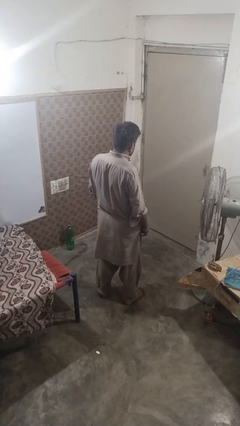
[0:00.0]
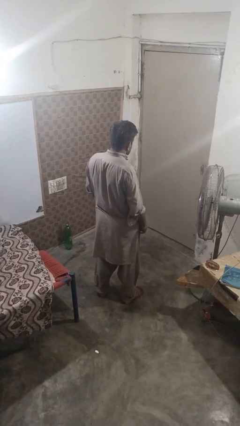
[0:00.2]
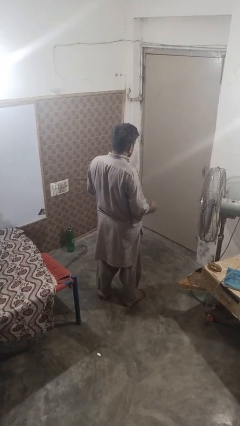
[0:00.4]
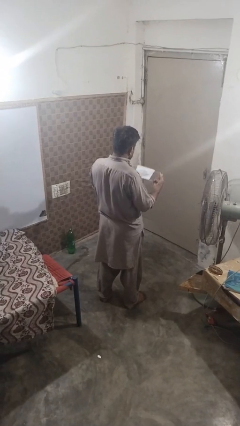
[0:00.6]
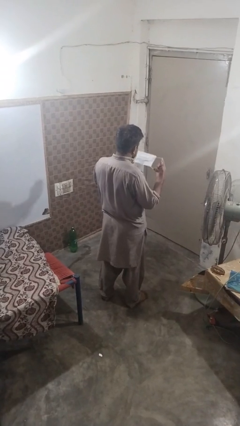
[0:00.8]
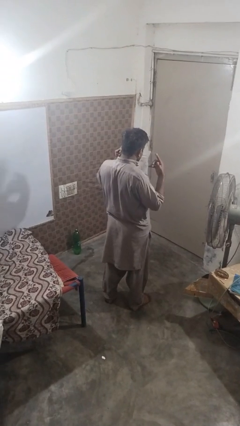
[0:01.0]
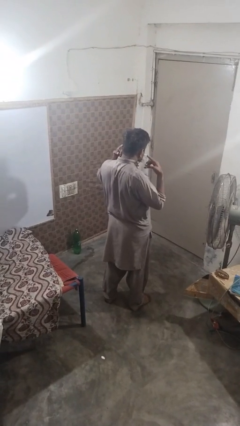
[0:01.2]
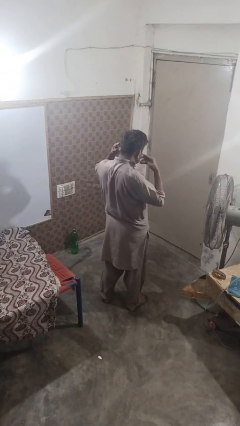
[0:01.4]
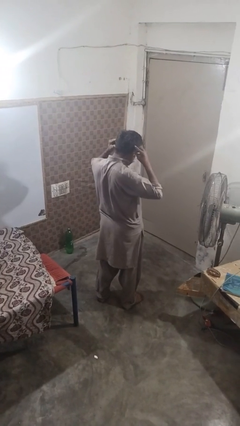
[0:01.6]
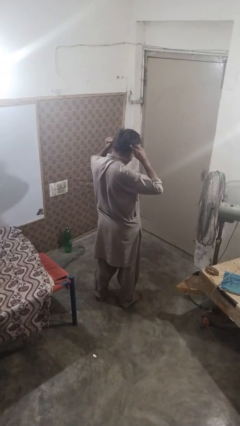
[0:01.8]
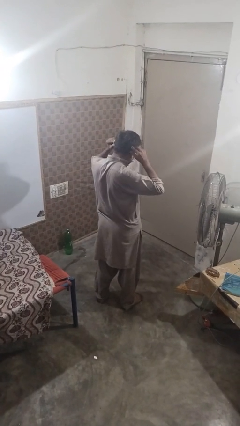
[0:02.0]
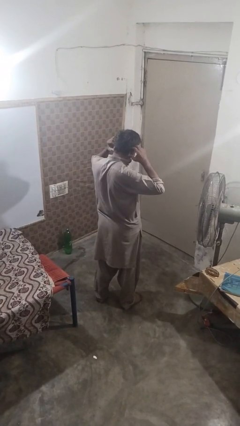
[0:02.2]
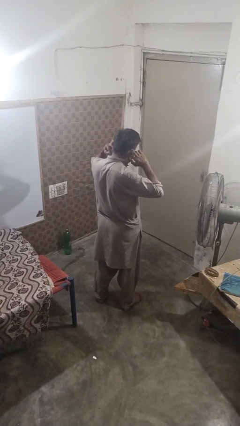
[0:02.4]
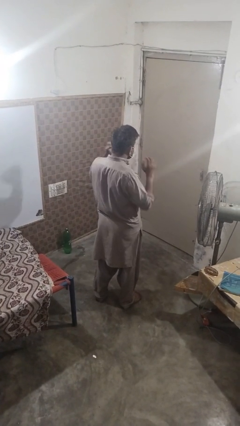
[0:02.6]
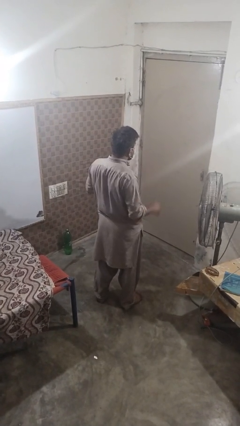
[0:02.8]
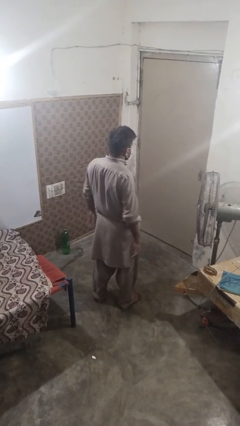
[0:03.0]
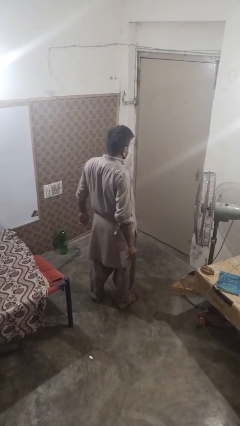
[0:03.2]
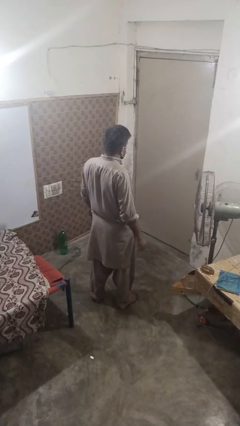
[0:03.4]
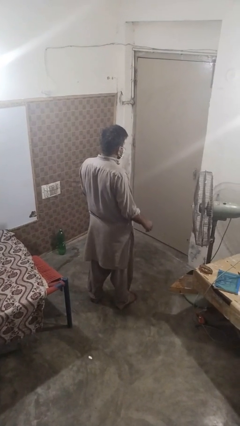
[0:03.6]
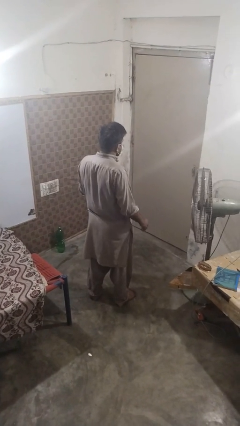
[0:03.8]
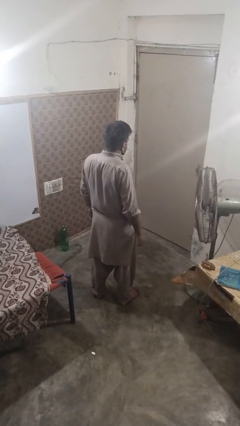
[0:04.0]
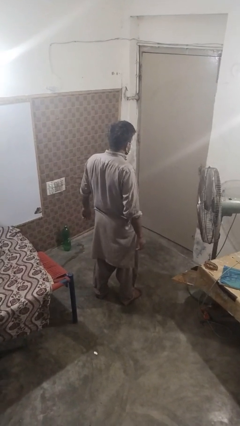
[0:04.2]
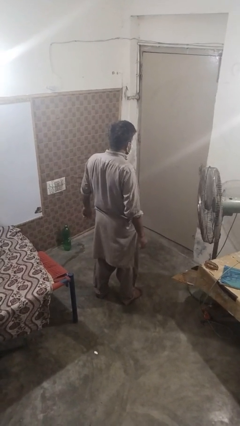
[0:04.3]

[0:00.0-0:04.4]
person puts on facemask

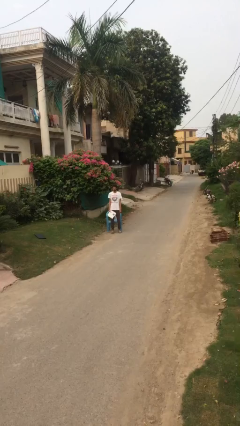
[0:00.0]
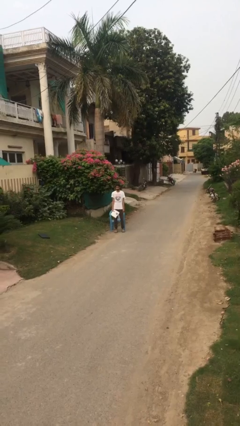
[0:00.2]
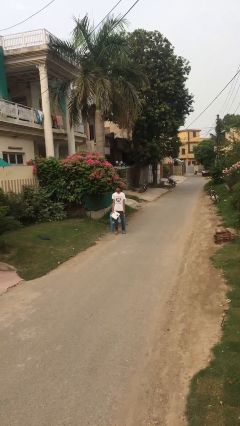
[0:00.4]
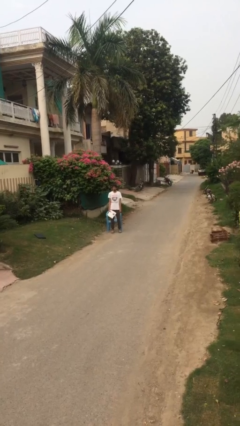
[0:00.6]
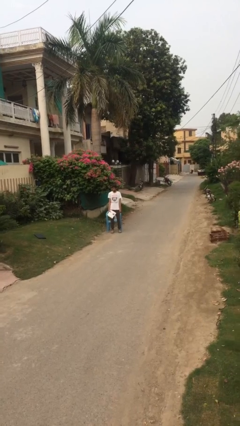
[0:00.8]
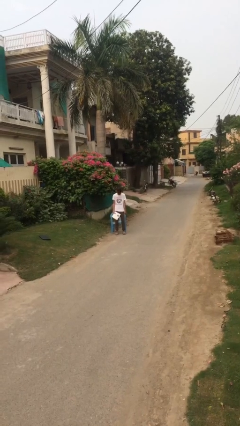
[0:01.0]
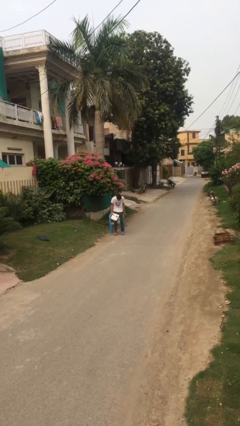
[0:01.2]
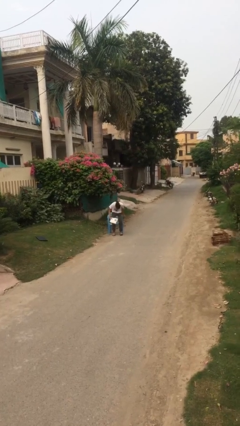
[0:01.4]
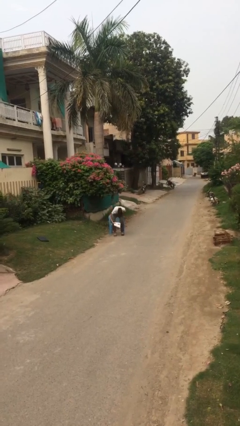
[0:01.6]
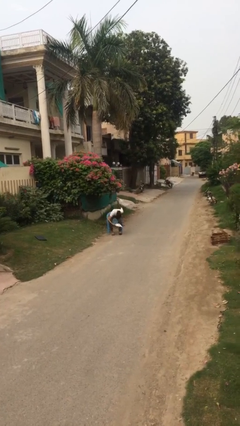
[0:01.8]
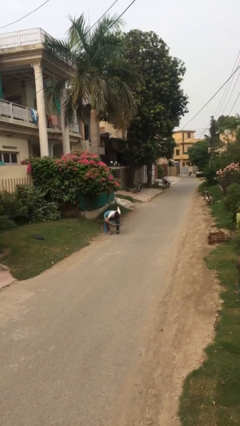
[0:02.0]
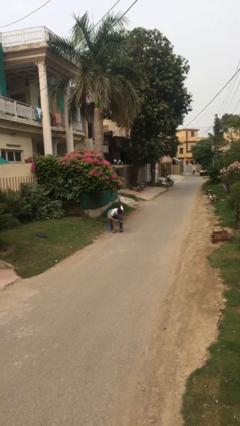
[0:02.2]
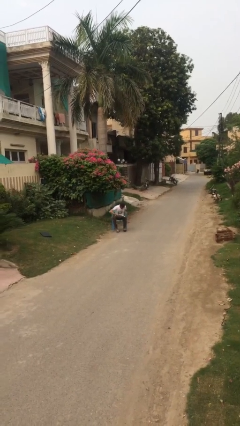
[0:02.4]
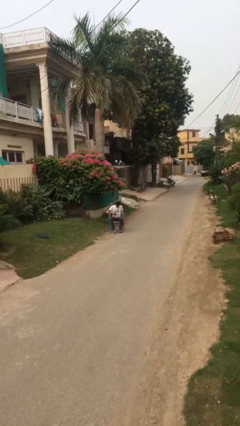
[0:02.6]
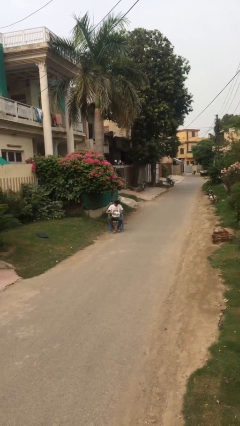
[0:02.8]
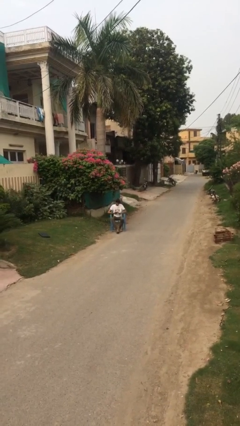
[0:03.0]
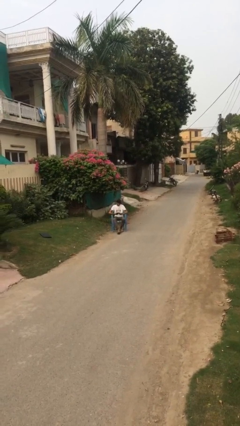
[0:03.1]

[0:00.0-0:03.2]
person sits down

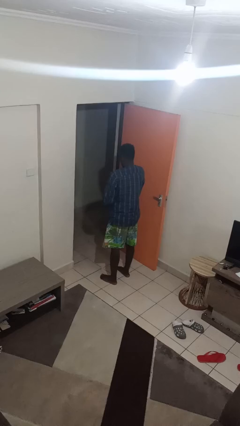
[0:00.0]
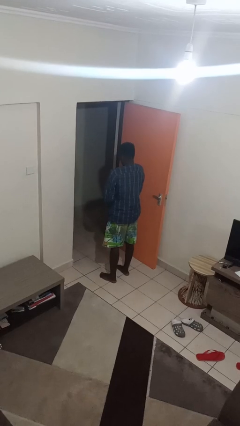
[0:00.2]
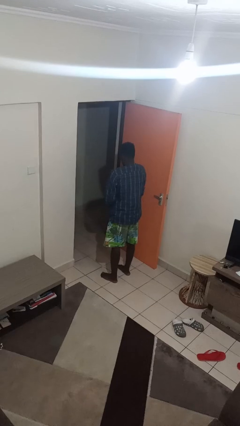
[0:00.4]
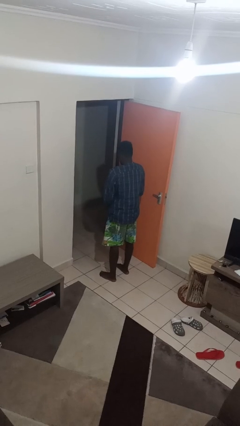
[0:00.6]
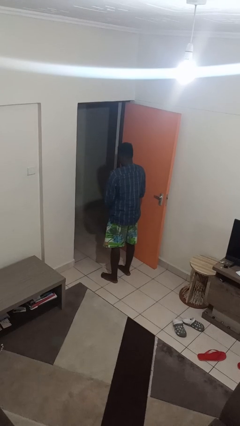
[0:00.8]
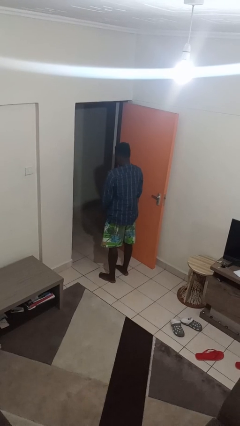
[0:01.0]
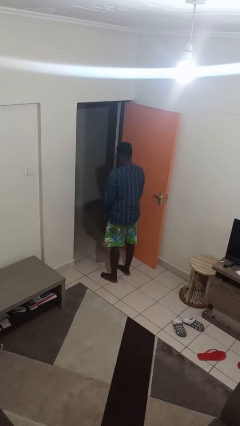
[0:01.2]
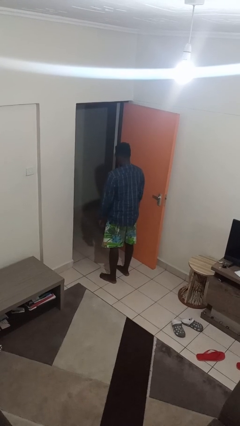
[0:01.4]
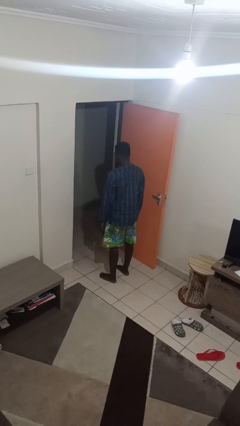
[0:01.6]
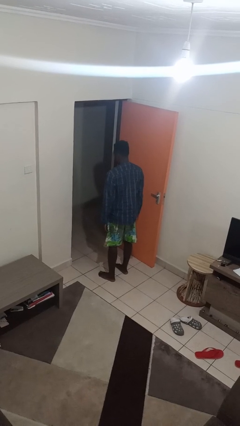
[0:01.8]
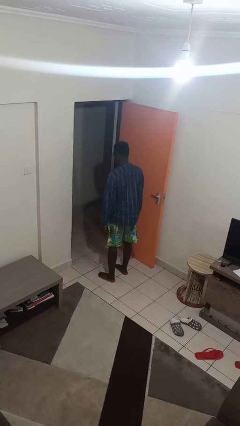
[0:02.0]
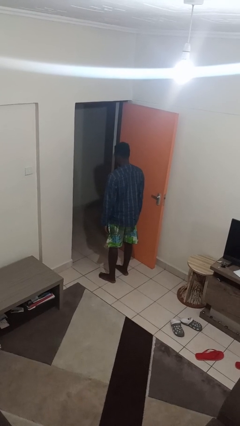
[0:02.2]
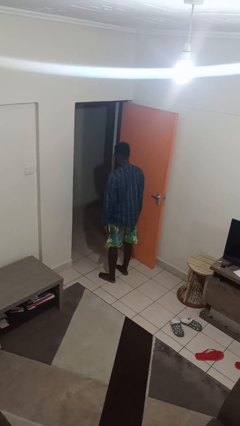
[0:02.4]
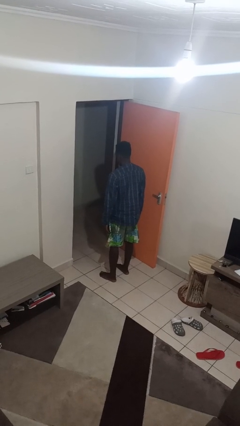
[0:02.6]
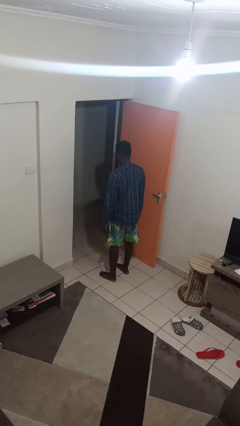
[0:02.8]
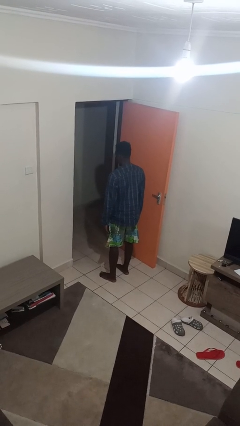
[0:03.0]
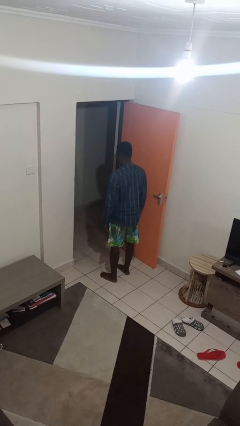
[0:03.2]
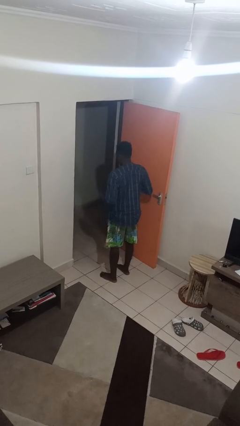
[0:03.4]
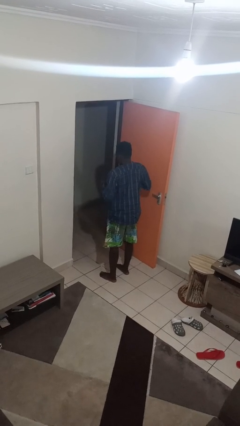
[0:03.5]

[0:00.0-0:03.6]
person unzips jacket

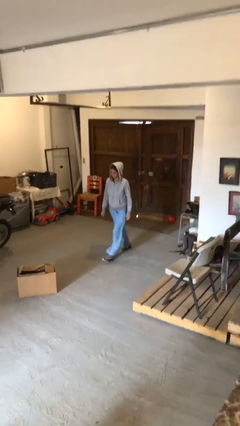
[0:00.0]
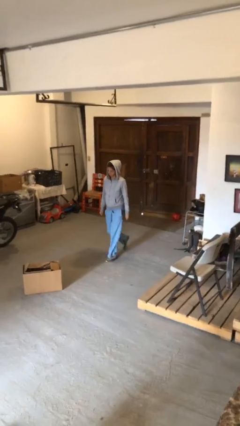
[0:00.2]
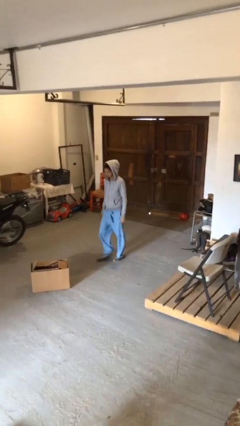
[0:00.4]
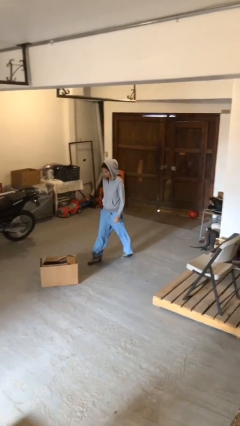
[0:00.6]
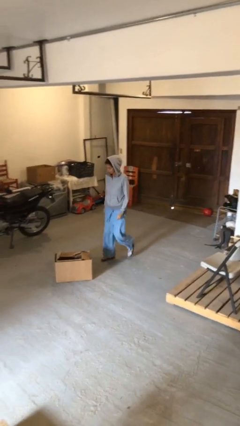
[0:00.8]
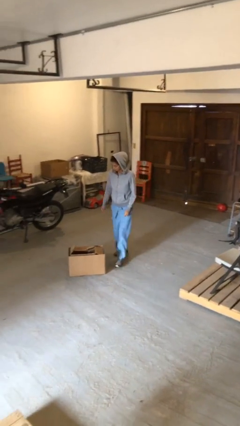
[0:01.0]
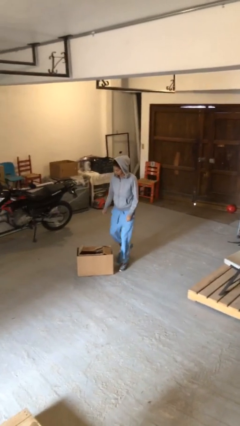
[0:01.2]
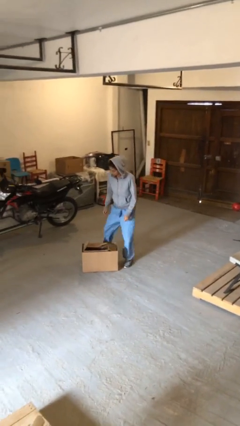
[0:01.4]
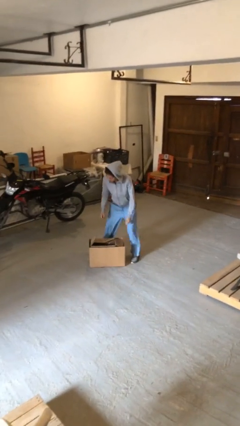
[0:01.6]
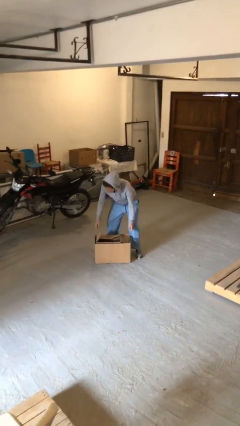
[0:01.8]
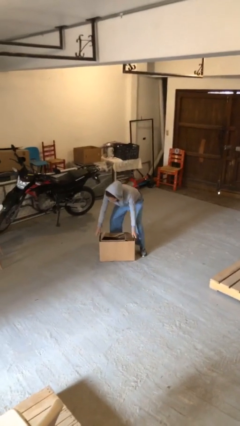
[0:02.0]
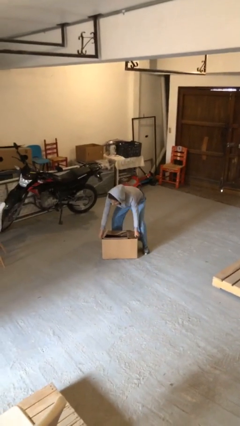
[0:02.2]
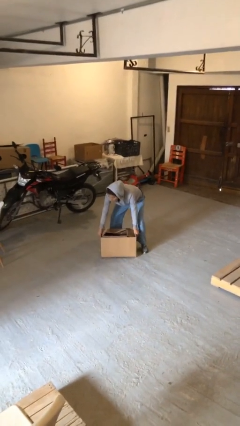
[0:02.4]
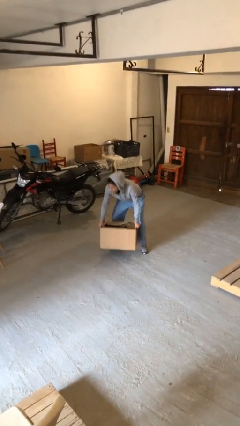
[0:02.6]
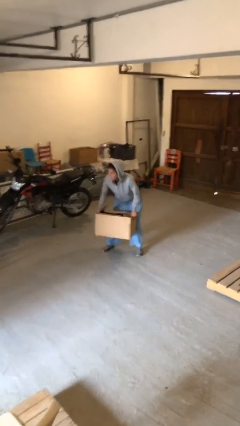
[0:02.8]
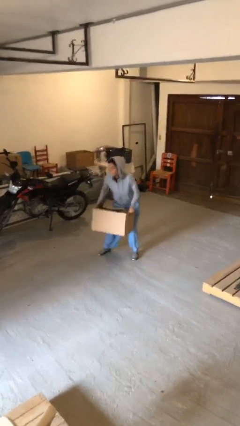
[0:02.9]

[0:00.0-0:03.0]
person picks up object from floor

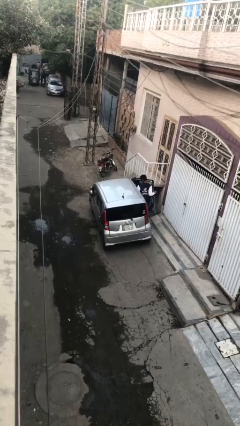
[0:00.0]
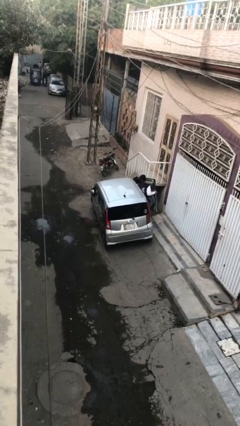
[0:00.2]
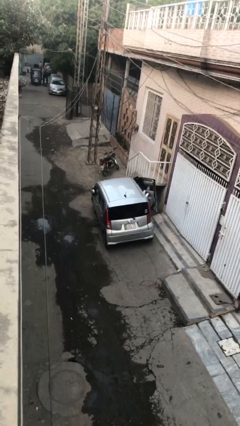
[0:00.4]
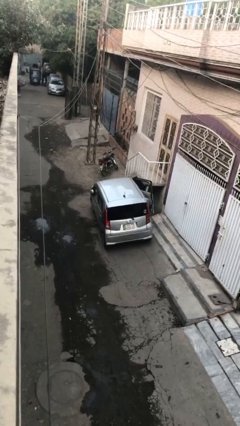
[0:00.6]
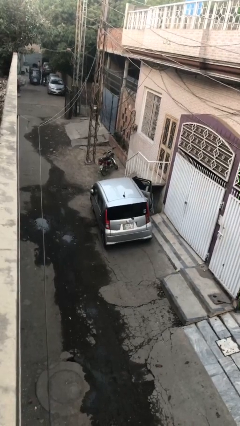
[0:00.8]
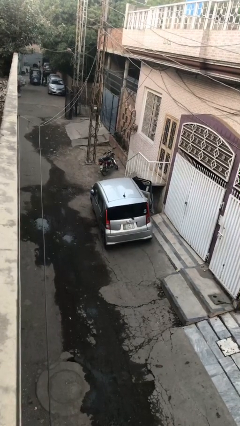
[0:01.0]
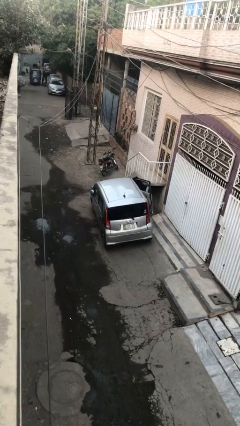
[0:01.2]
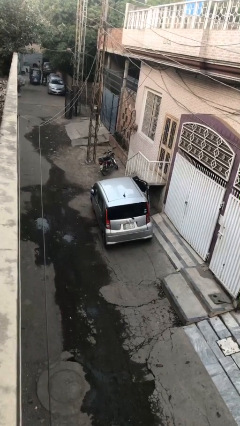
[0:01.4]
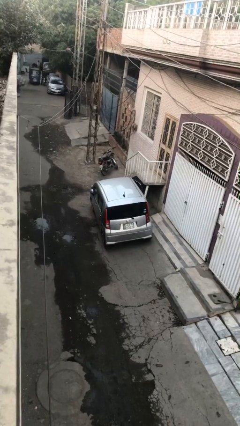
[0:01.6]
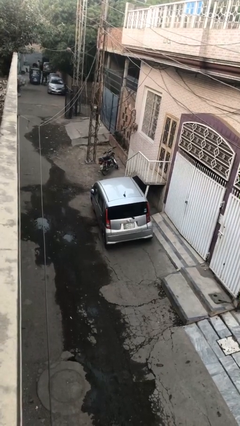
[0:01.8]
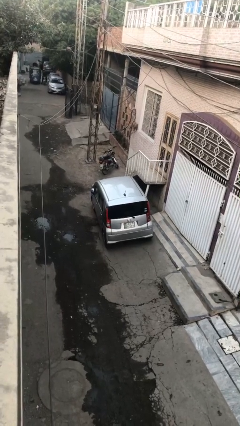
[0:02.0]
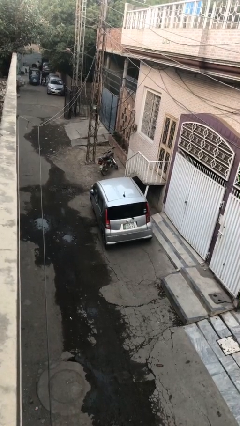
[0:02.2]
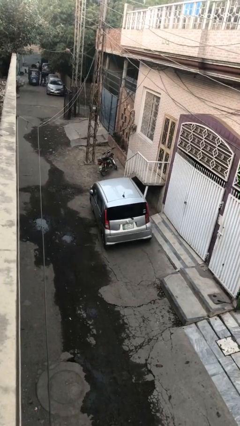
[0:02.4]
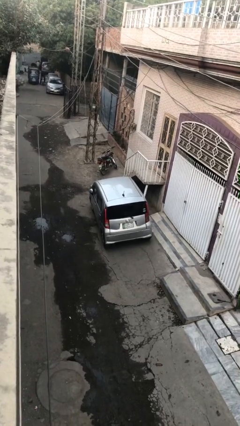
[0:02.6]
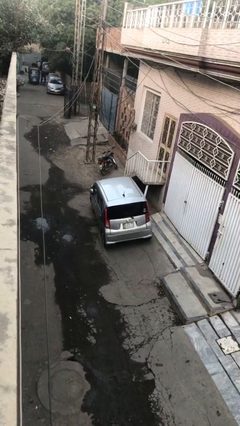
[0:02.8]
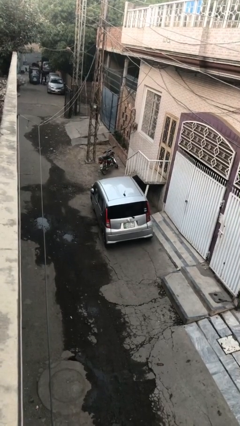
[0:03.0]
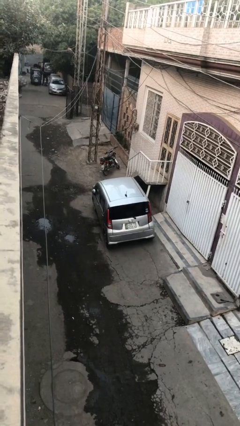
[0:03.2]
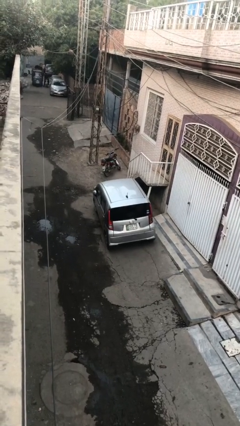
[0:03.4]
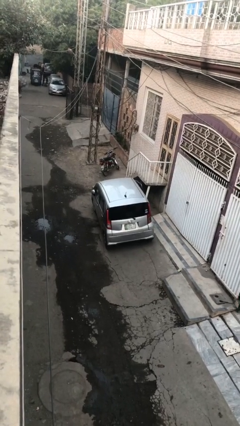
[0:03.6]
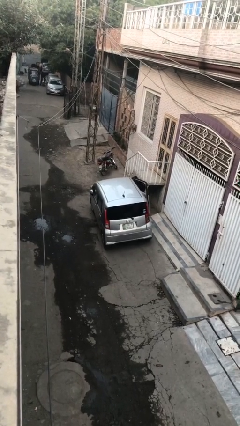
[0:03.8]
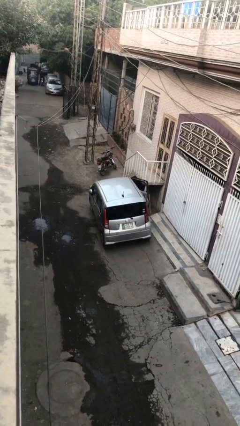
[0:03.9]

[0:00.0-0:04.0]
car picks up person
